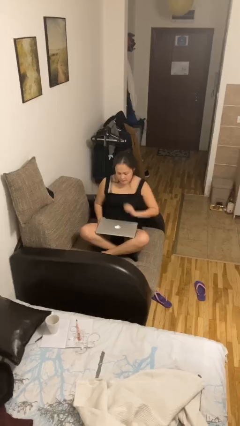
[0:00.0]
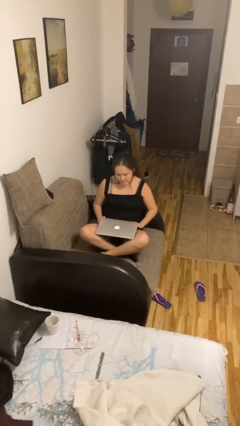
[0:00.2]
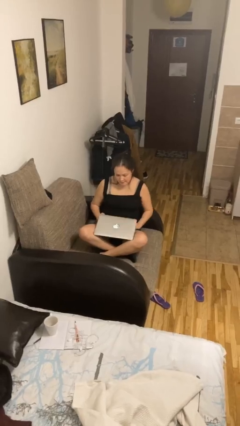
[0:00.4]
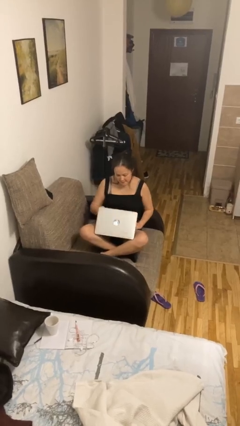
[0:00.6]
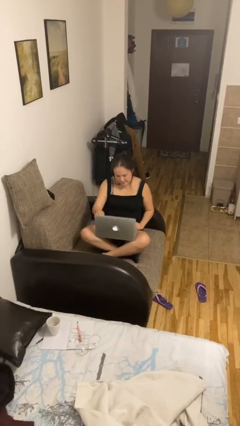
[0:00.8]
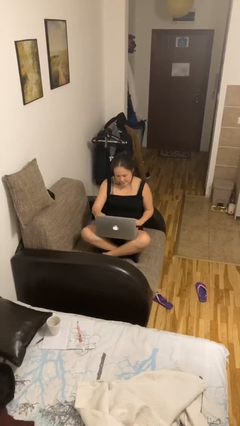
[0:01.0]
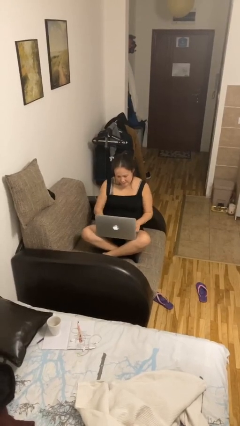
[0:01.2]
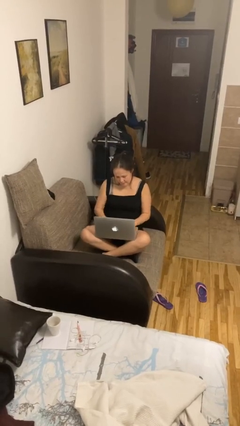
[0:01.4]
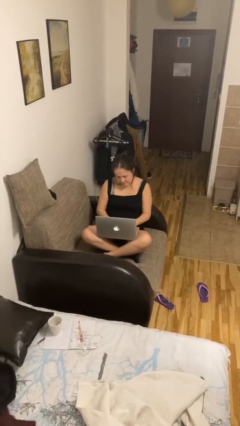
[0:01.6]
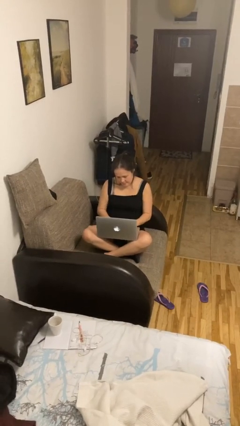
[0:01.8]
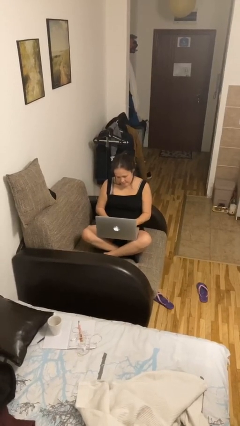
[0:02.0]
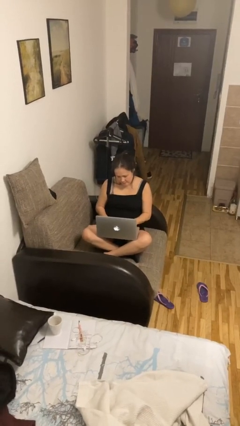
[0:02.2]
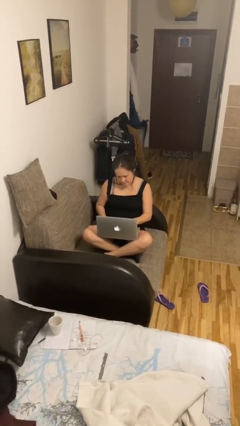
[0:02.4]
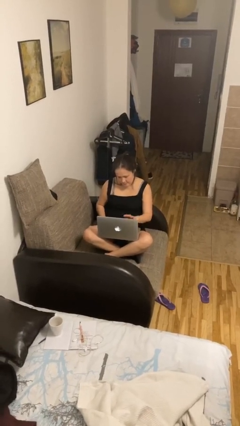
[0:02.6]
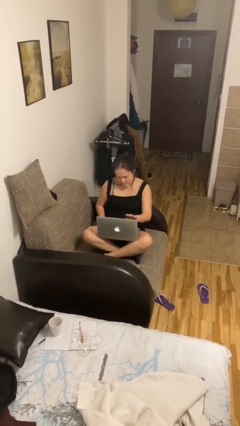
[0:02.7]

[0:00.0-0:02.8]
person interacts with laptop

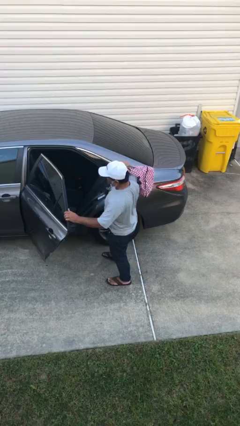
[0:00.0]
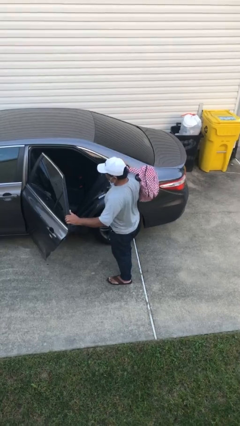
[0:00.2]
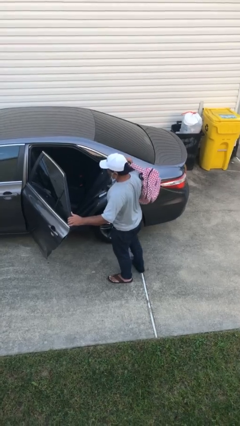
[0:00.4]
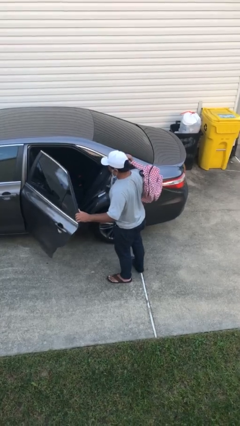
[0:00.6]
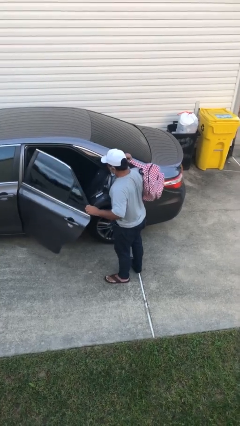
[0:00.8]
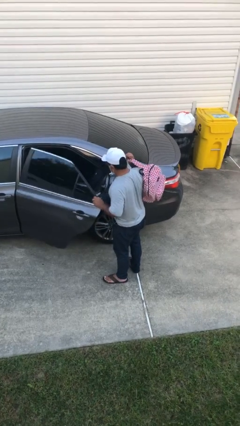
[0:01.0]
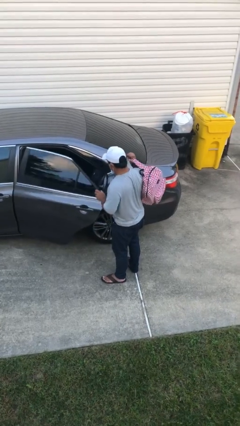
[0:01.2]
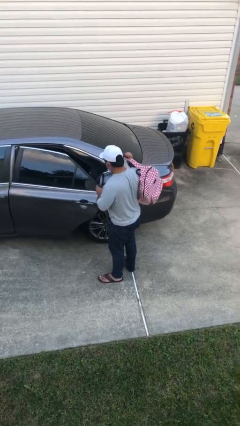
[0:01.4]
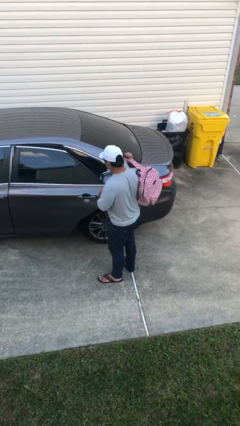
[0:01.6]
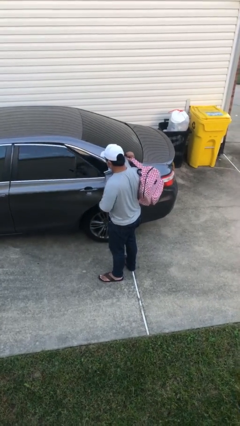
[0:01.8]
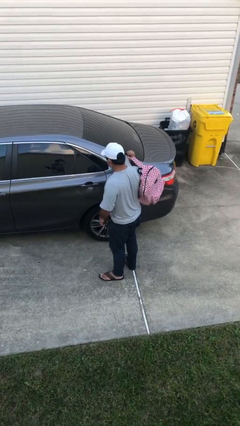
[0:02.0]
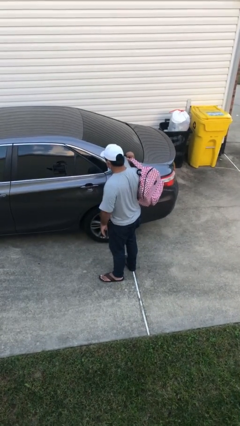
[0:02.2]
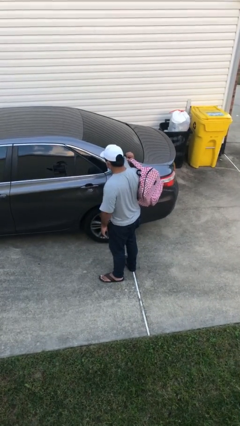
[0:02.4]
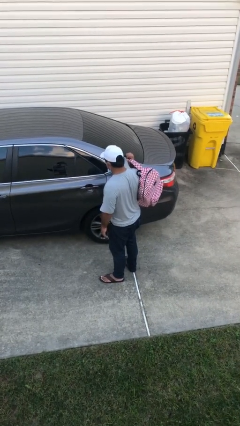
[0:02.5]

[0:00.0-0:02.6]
person closes car door

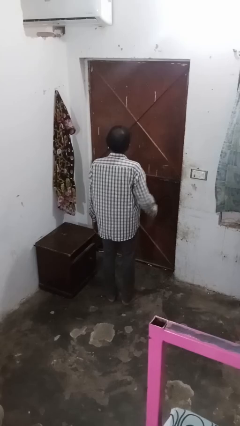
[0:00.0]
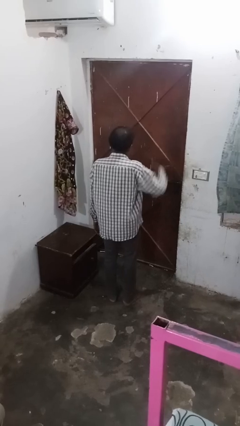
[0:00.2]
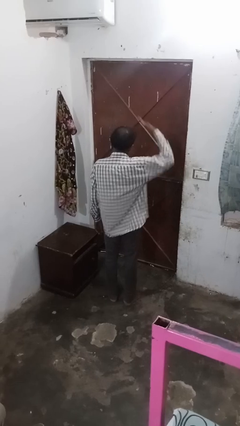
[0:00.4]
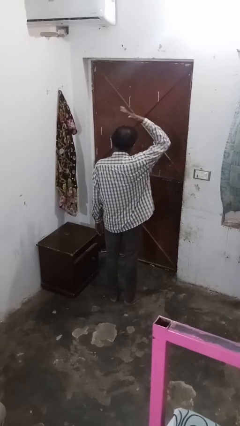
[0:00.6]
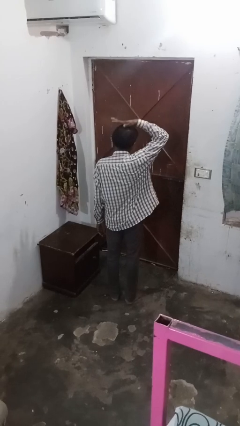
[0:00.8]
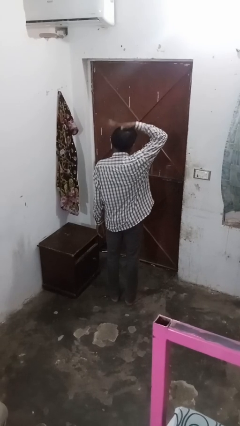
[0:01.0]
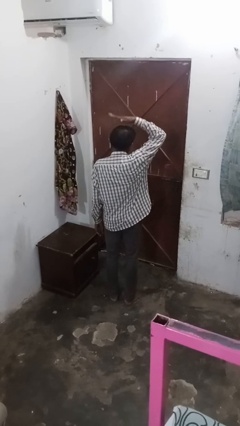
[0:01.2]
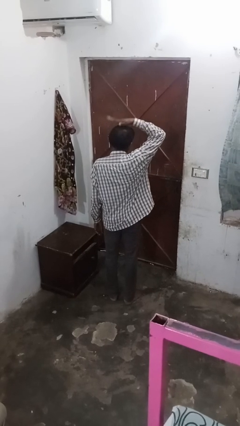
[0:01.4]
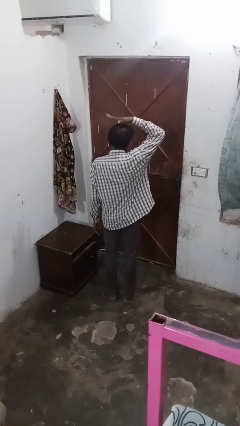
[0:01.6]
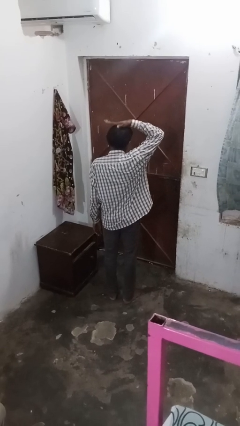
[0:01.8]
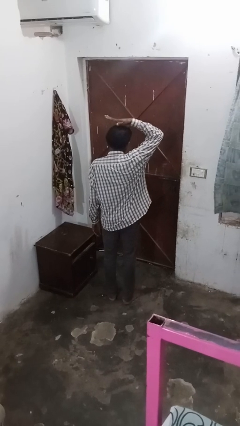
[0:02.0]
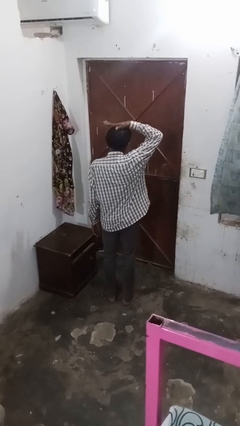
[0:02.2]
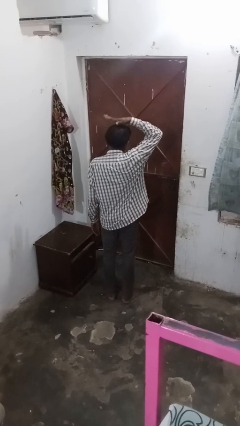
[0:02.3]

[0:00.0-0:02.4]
person pats head

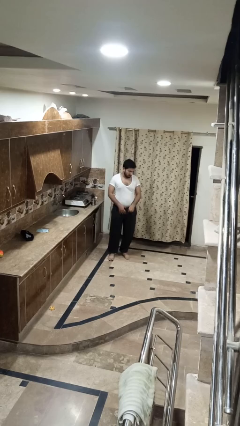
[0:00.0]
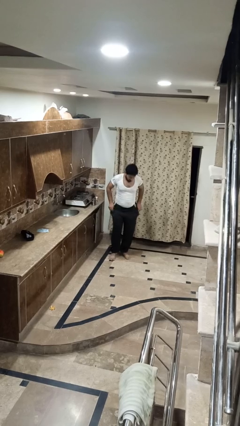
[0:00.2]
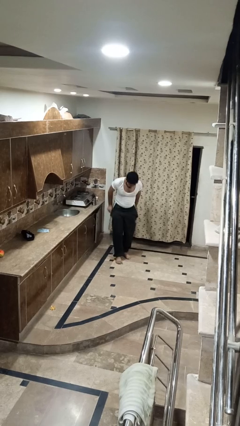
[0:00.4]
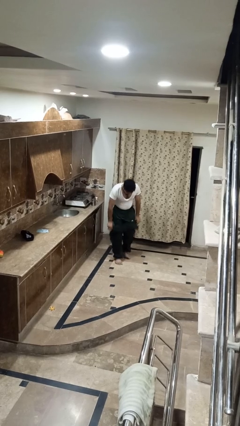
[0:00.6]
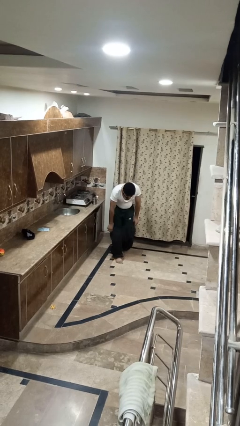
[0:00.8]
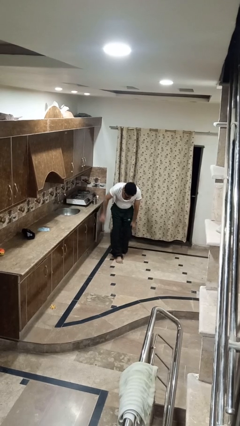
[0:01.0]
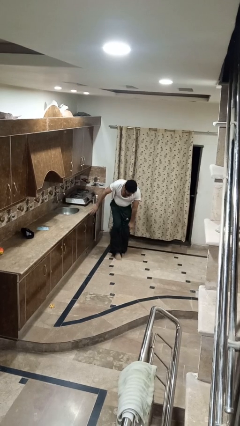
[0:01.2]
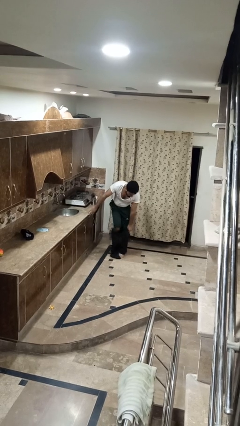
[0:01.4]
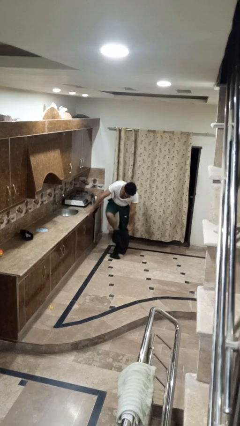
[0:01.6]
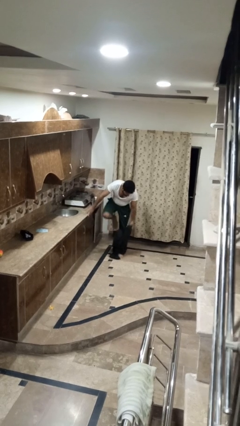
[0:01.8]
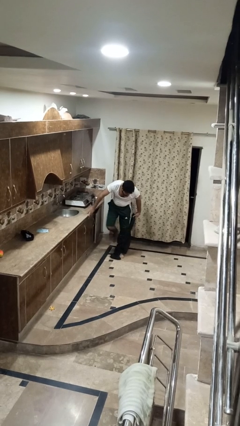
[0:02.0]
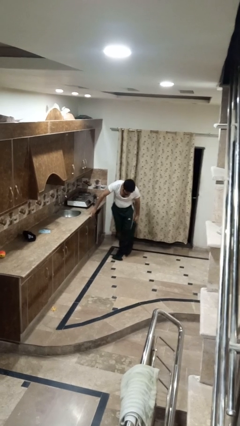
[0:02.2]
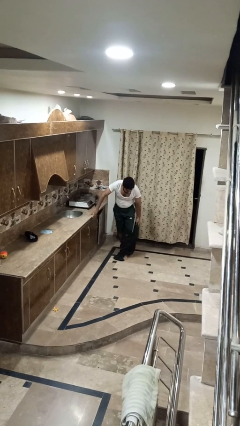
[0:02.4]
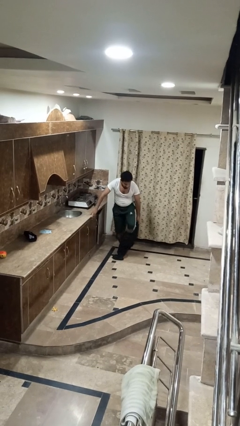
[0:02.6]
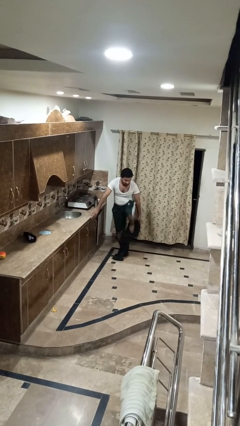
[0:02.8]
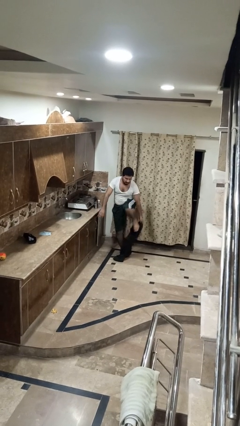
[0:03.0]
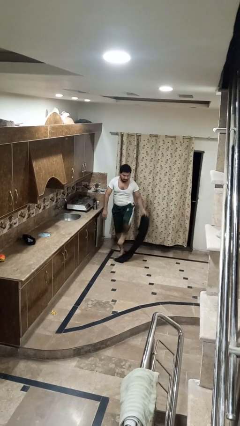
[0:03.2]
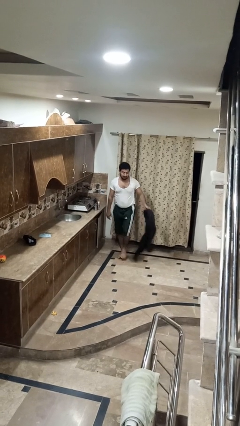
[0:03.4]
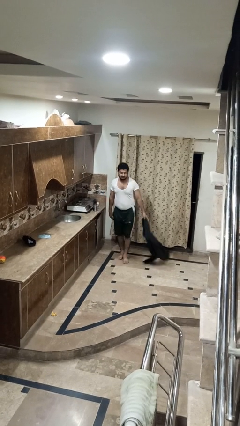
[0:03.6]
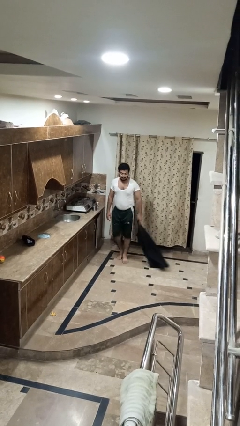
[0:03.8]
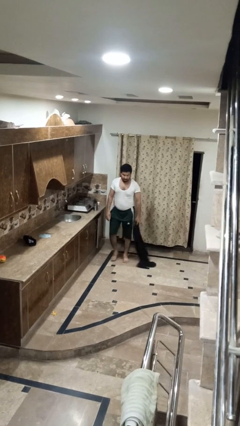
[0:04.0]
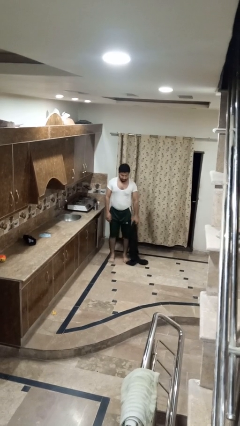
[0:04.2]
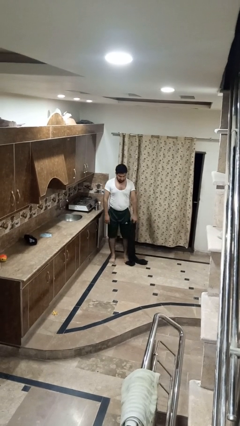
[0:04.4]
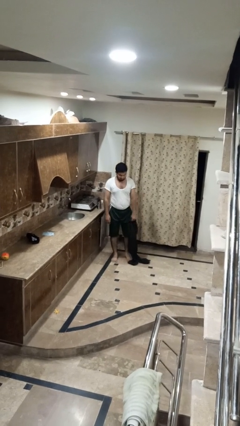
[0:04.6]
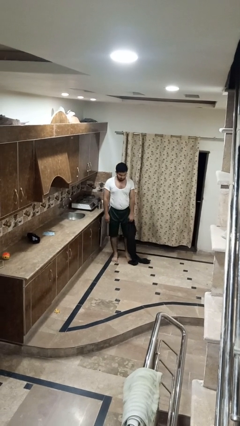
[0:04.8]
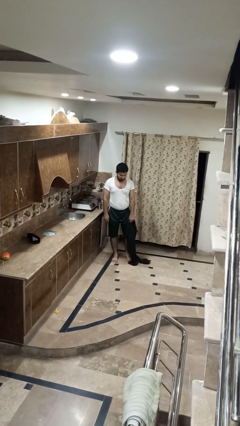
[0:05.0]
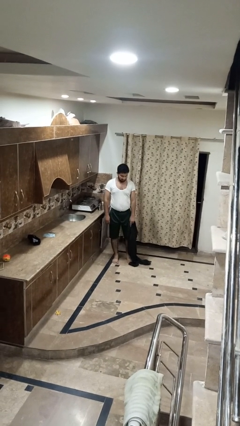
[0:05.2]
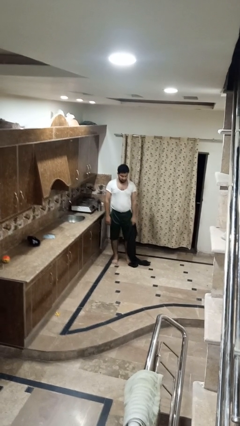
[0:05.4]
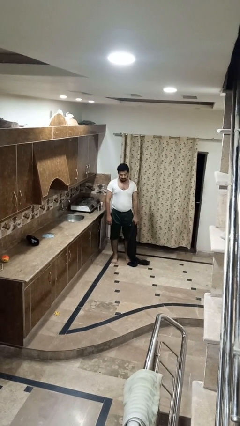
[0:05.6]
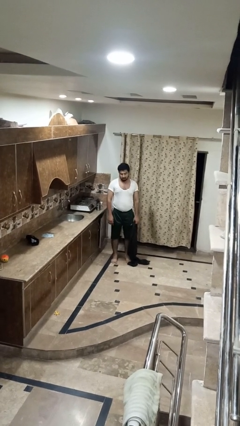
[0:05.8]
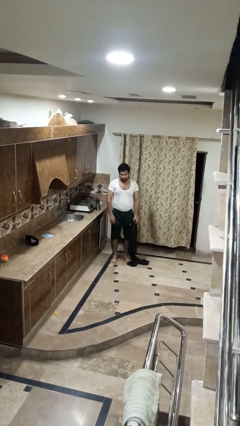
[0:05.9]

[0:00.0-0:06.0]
person takes off pants

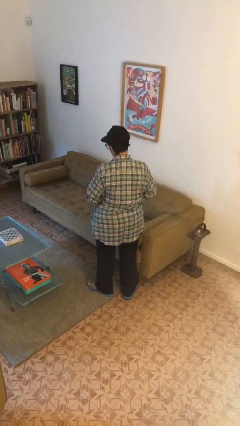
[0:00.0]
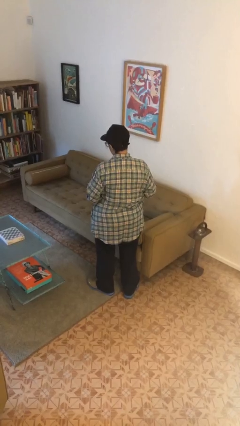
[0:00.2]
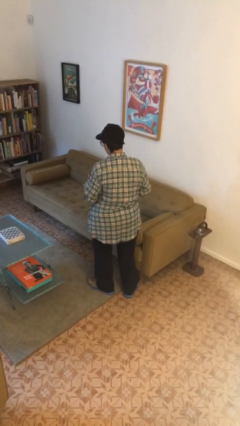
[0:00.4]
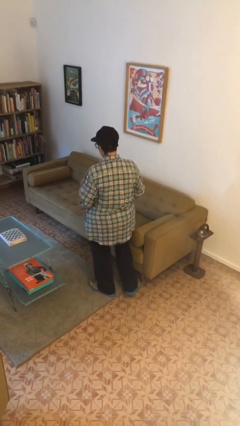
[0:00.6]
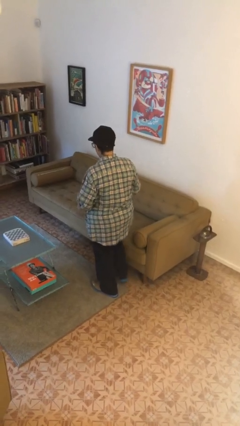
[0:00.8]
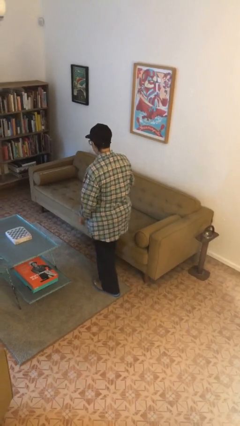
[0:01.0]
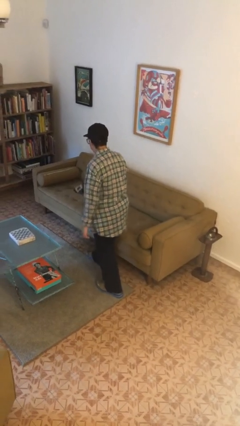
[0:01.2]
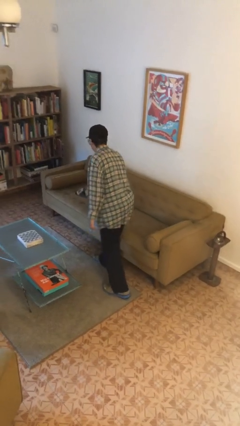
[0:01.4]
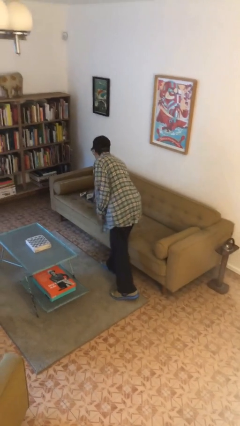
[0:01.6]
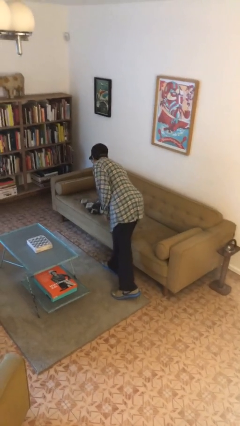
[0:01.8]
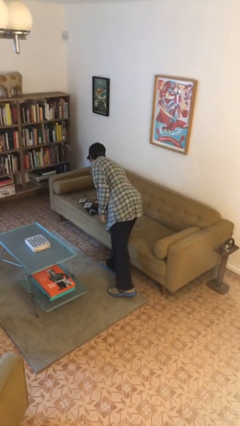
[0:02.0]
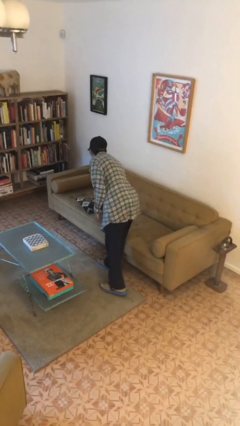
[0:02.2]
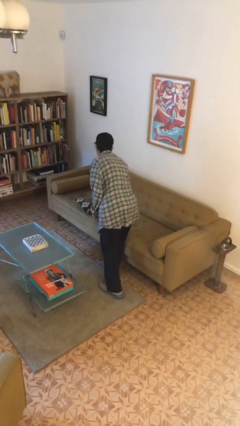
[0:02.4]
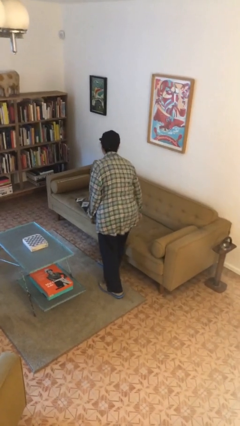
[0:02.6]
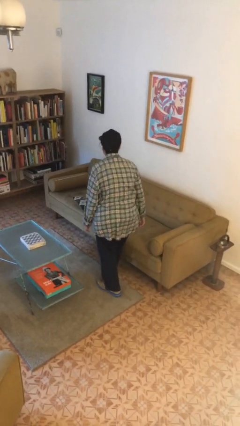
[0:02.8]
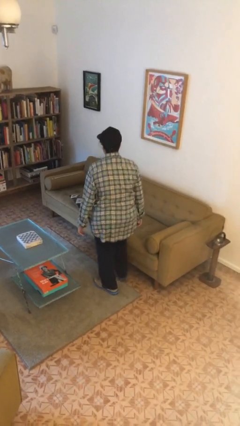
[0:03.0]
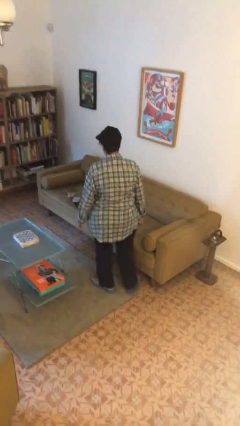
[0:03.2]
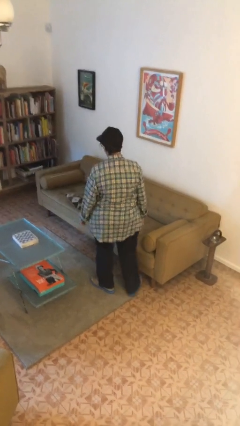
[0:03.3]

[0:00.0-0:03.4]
person puts down object on couch

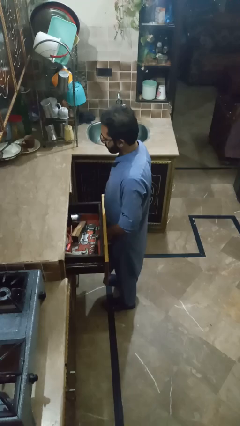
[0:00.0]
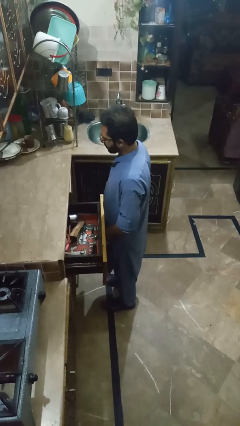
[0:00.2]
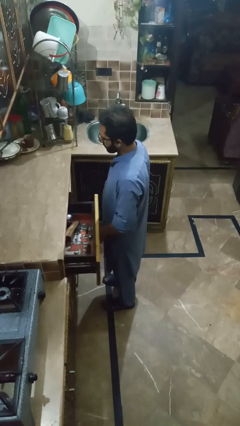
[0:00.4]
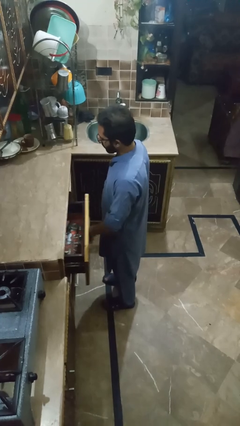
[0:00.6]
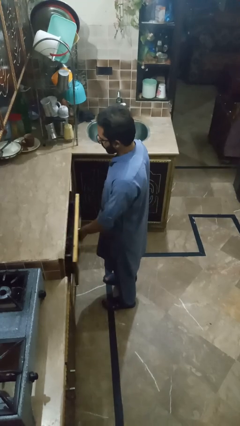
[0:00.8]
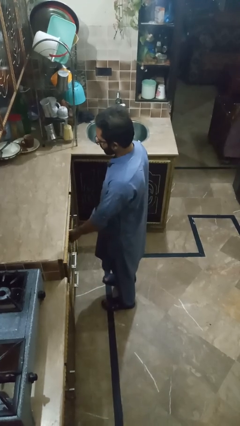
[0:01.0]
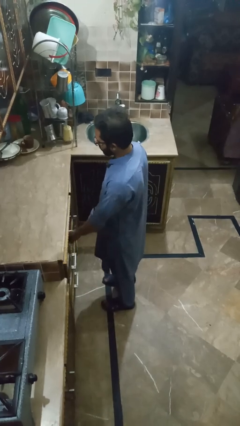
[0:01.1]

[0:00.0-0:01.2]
person closes kitchen drawer
